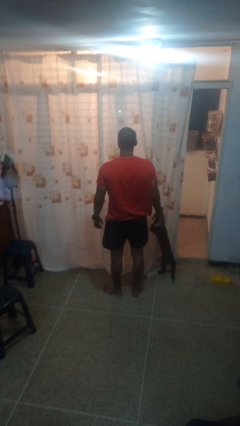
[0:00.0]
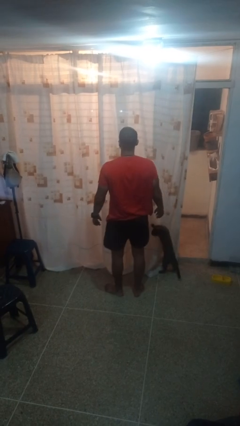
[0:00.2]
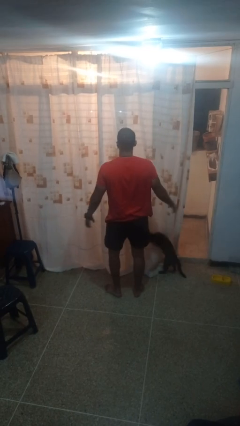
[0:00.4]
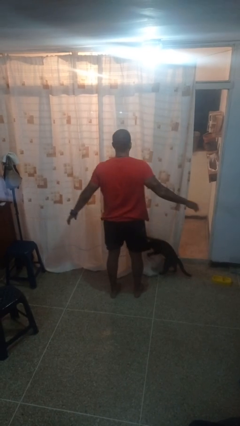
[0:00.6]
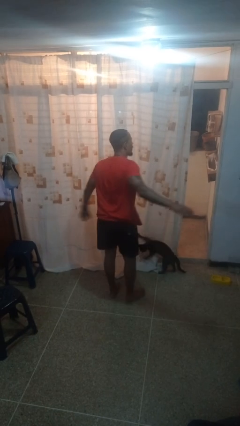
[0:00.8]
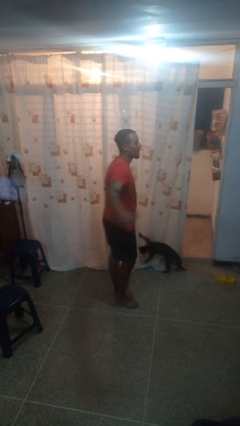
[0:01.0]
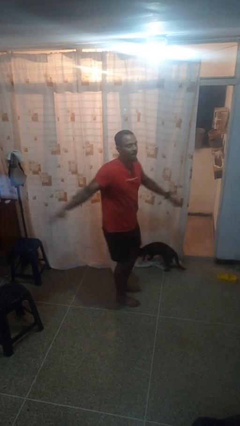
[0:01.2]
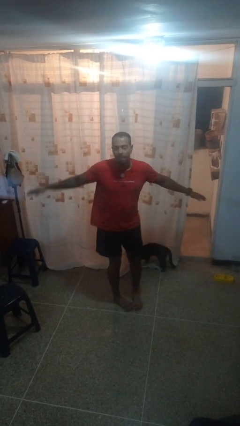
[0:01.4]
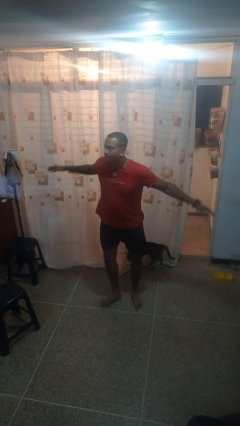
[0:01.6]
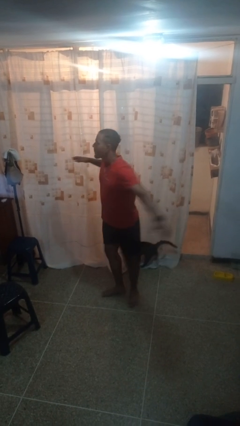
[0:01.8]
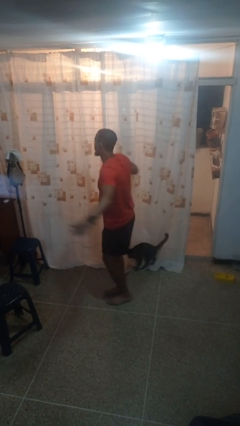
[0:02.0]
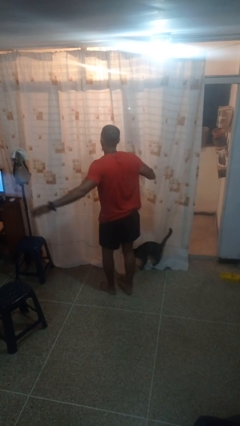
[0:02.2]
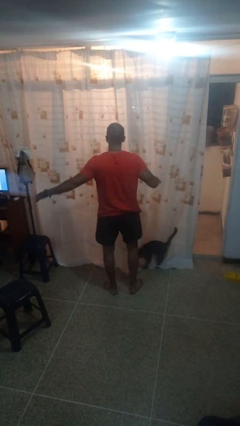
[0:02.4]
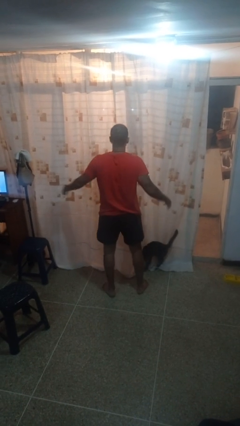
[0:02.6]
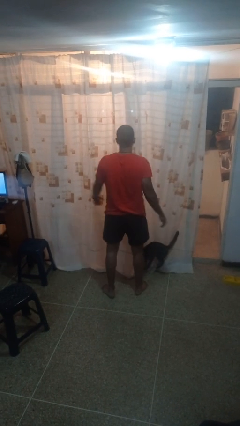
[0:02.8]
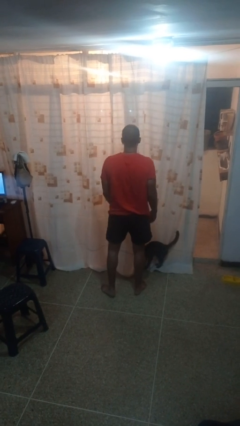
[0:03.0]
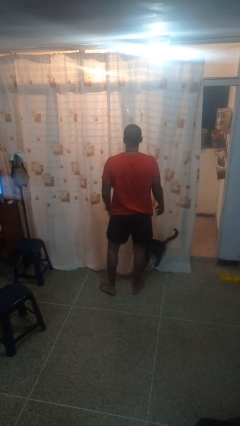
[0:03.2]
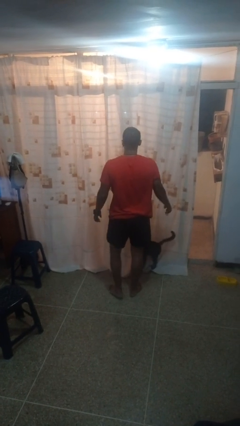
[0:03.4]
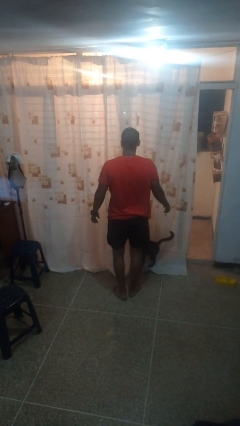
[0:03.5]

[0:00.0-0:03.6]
person twirls

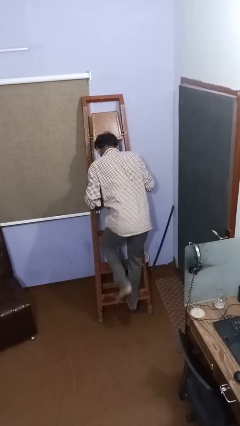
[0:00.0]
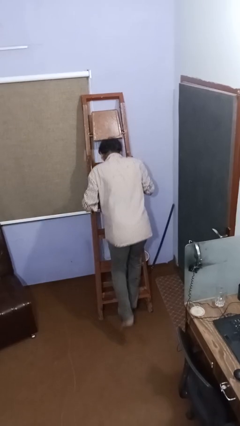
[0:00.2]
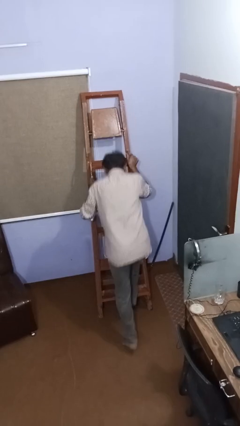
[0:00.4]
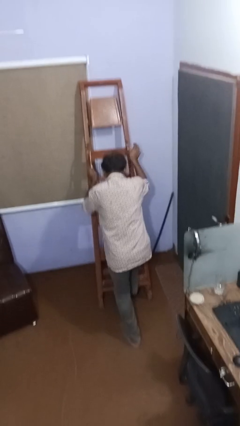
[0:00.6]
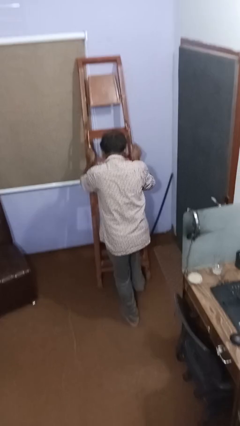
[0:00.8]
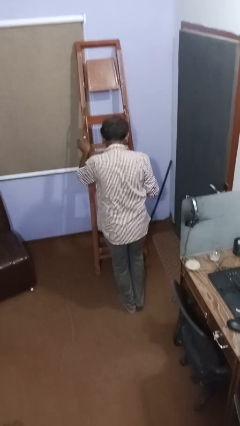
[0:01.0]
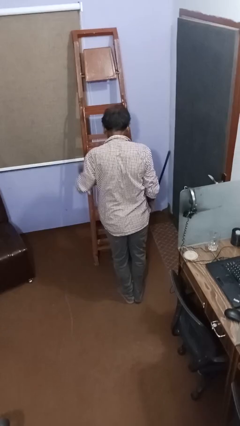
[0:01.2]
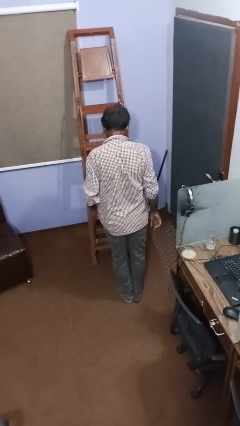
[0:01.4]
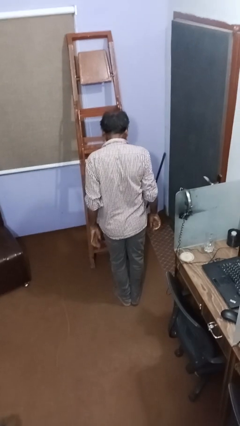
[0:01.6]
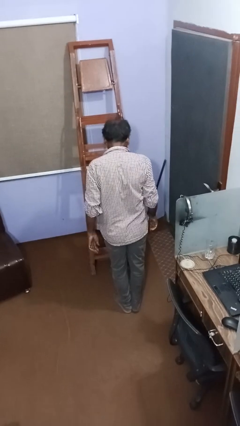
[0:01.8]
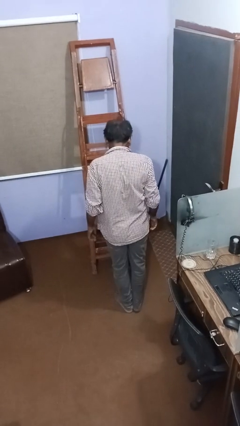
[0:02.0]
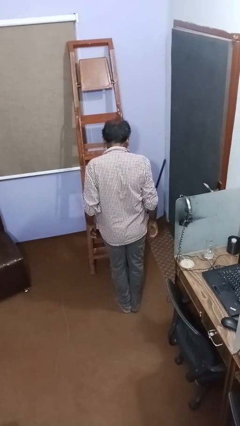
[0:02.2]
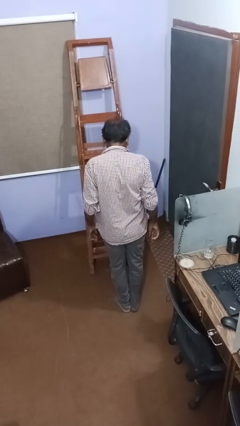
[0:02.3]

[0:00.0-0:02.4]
person climbs down ladder

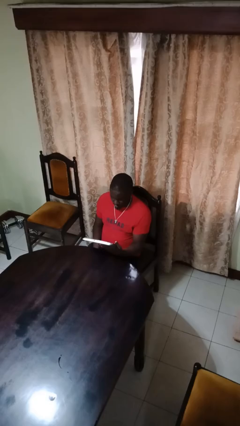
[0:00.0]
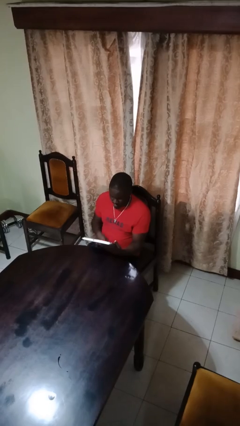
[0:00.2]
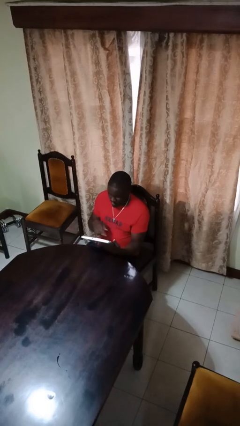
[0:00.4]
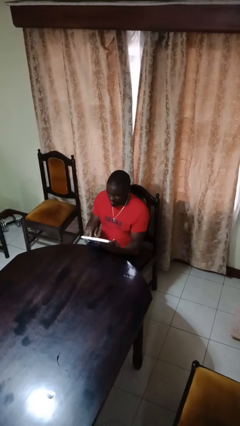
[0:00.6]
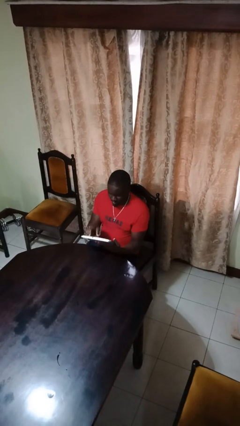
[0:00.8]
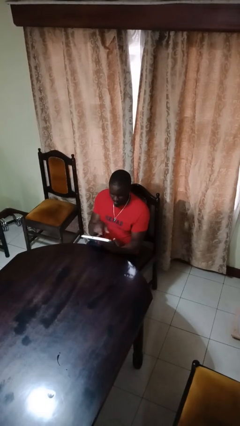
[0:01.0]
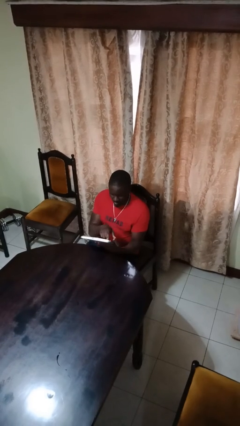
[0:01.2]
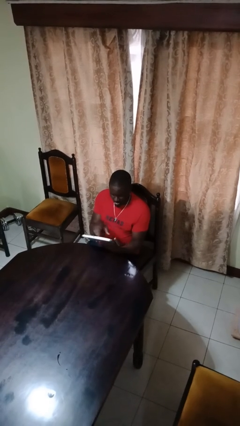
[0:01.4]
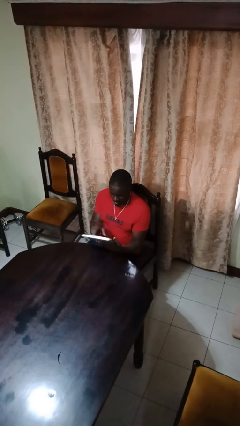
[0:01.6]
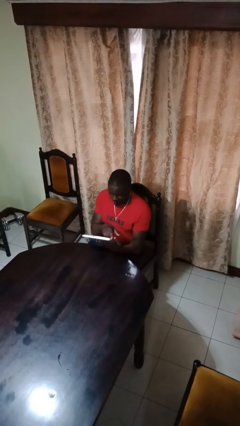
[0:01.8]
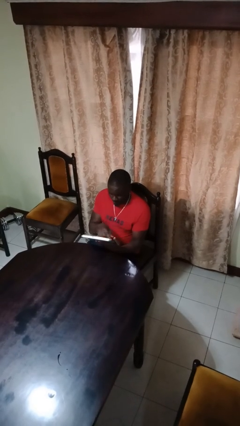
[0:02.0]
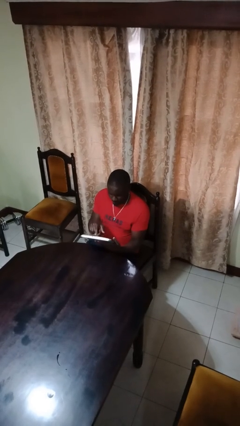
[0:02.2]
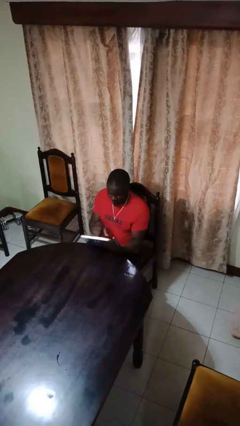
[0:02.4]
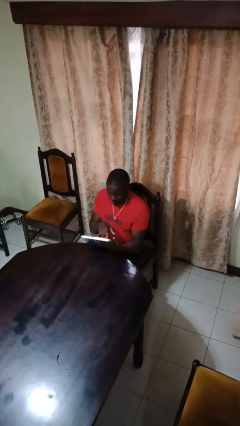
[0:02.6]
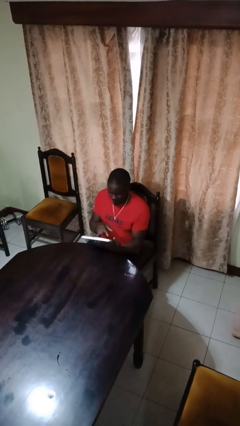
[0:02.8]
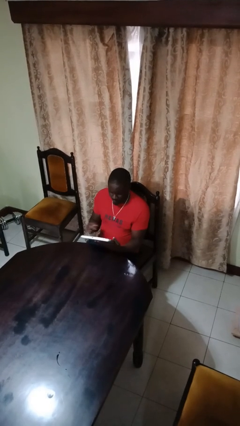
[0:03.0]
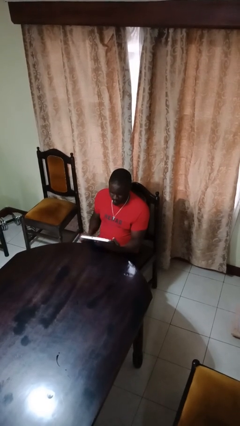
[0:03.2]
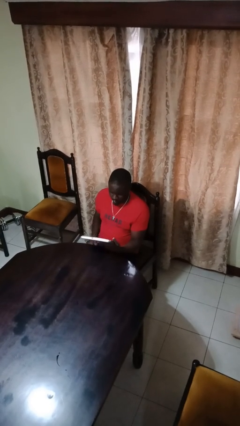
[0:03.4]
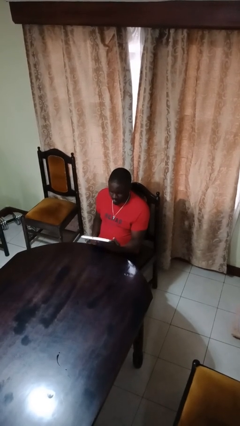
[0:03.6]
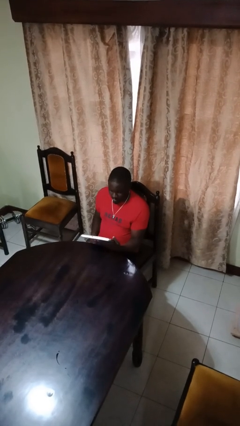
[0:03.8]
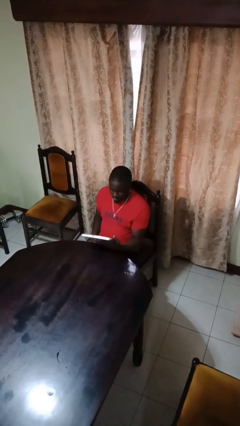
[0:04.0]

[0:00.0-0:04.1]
person interacts with tablet

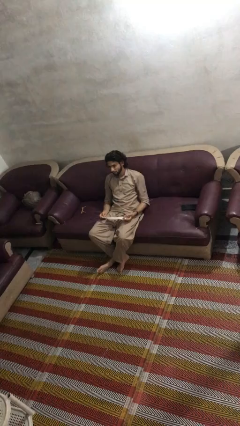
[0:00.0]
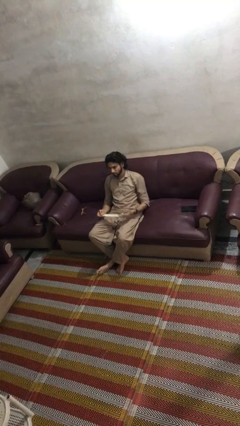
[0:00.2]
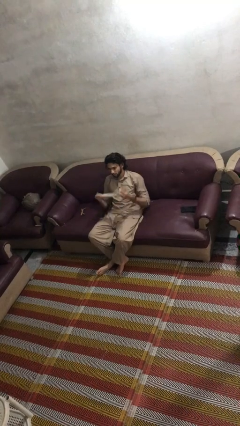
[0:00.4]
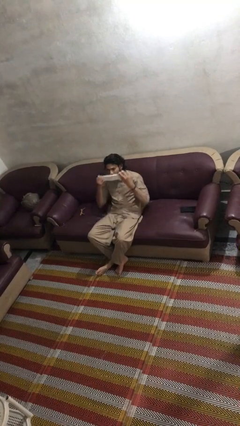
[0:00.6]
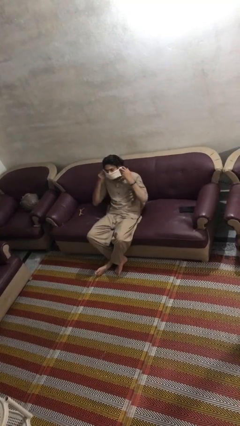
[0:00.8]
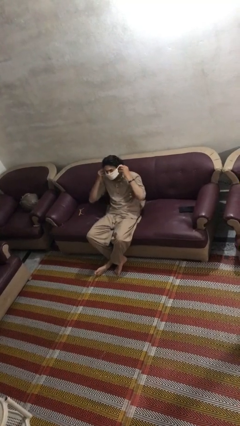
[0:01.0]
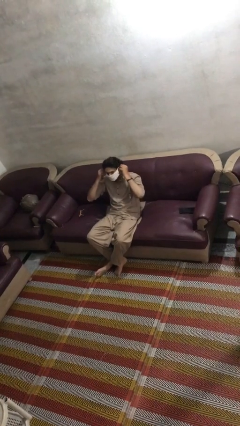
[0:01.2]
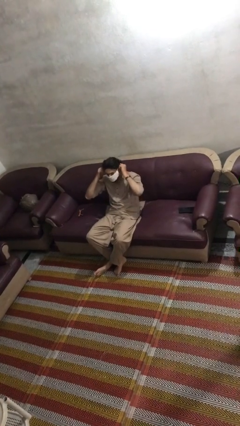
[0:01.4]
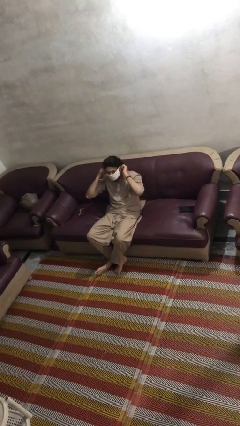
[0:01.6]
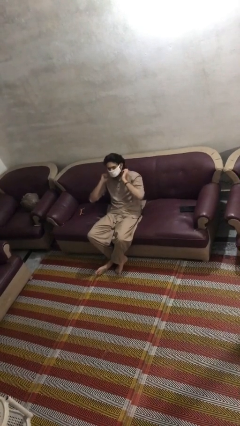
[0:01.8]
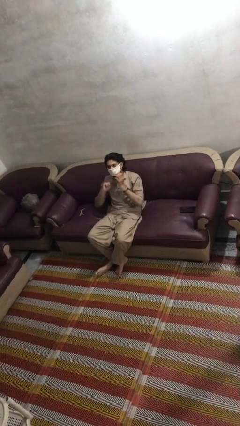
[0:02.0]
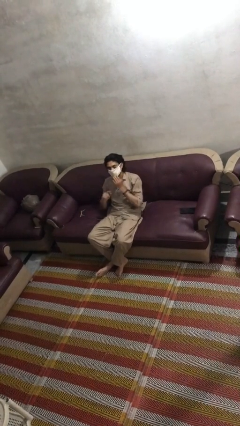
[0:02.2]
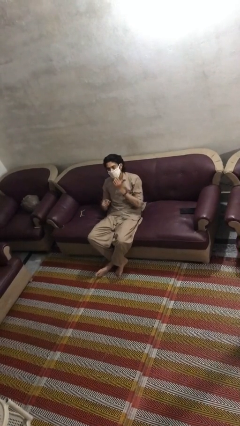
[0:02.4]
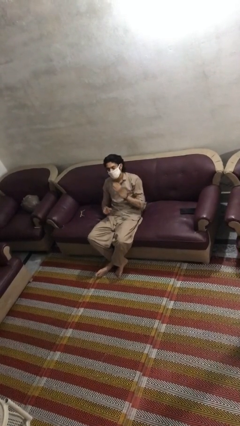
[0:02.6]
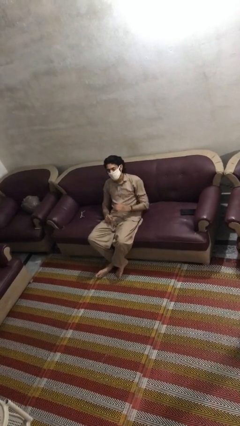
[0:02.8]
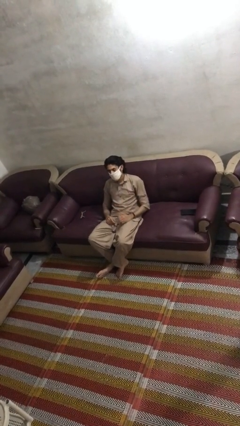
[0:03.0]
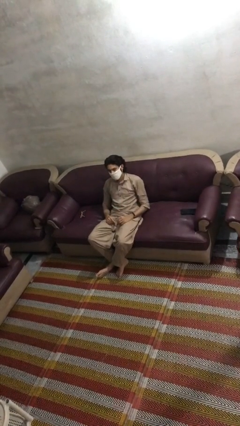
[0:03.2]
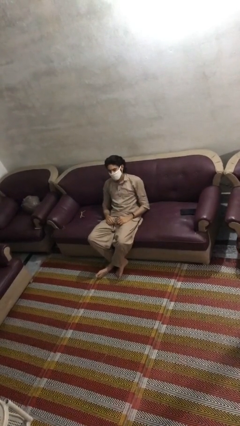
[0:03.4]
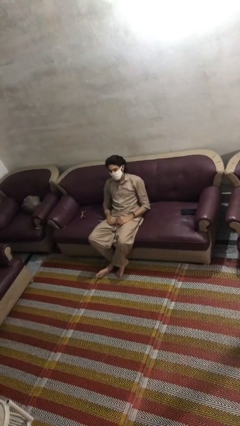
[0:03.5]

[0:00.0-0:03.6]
person puts on facemask

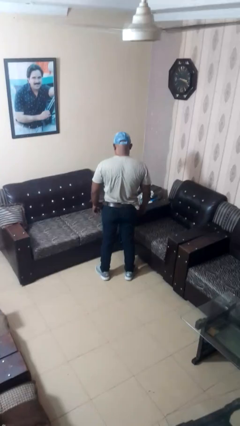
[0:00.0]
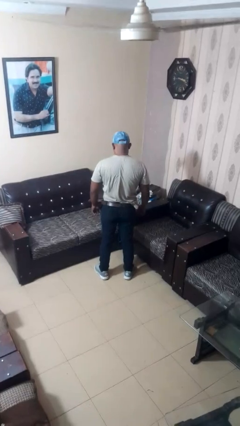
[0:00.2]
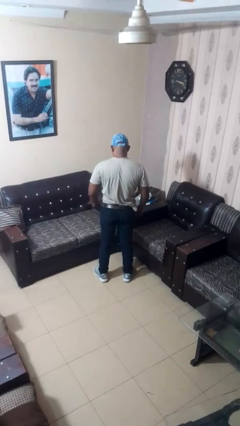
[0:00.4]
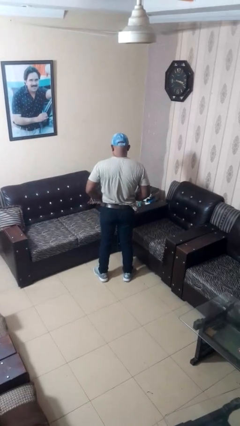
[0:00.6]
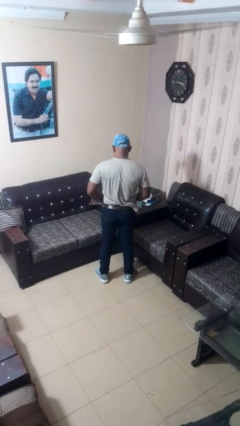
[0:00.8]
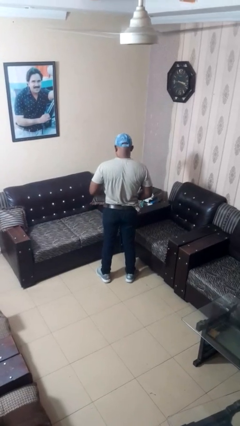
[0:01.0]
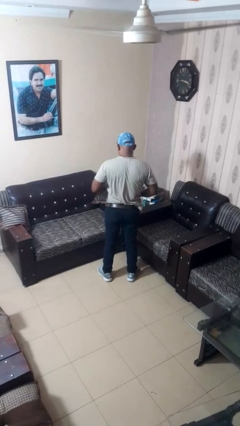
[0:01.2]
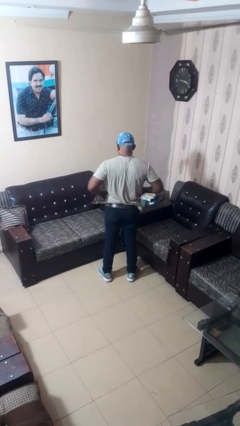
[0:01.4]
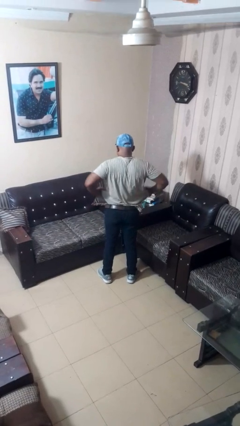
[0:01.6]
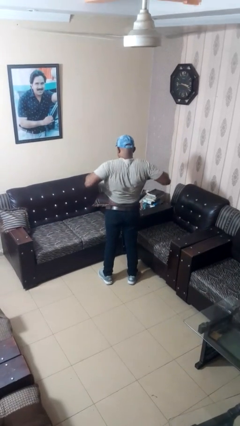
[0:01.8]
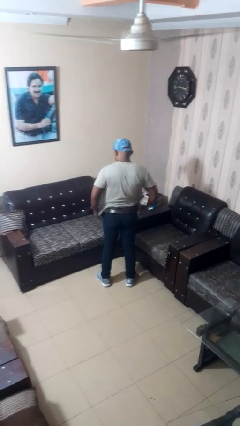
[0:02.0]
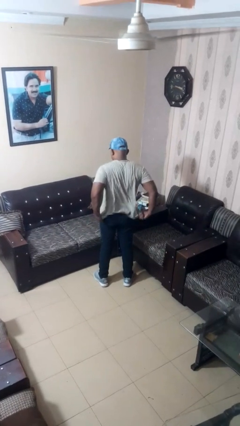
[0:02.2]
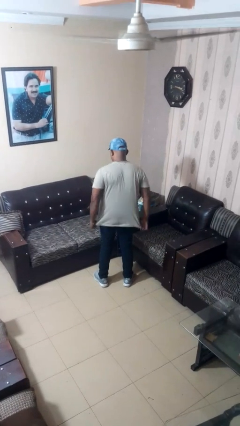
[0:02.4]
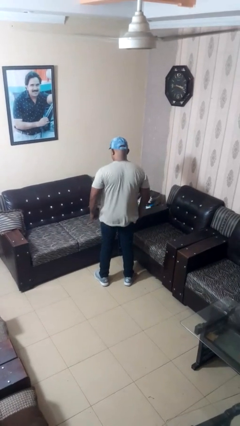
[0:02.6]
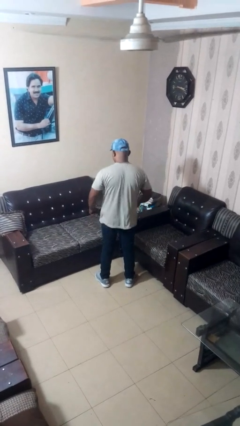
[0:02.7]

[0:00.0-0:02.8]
person untucks shirt

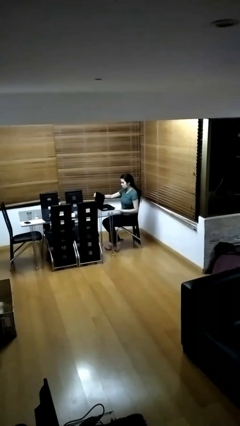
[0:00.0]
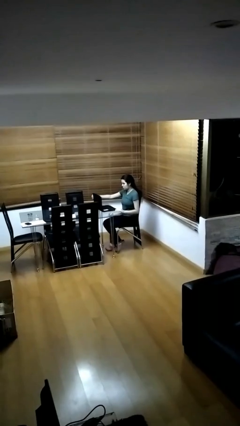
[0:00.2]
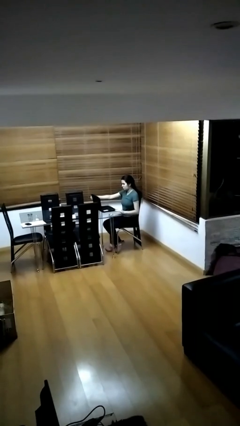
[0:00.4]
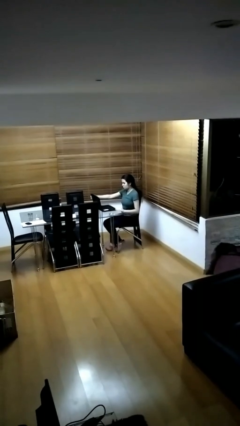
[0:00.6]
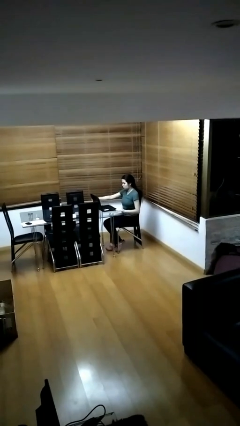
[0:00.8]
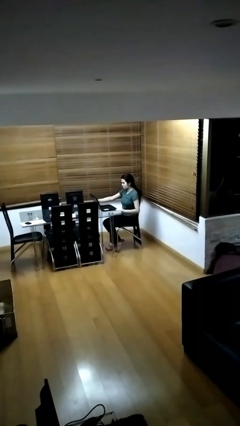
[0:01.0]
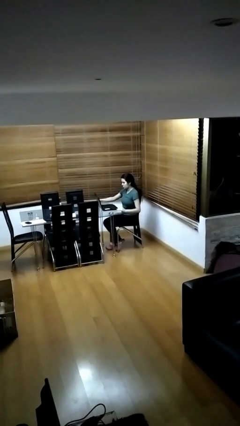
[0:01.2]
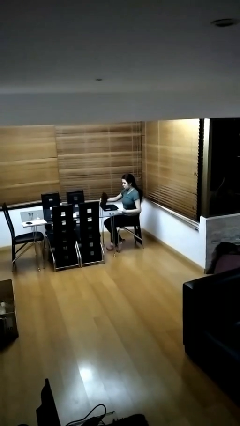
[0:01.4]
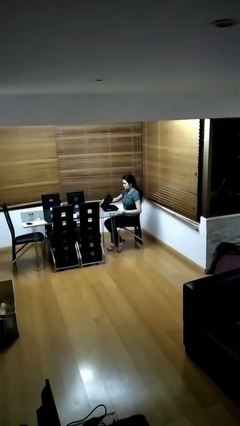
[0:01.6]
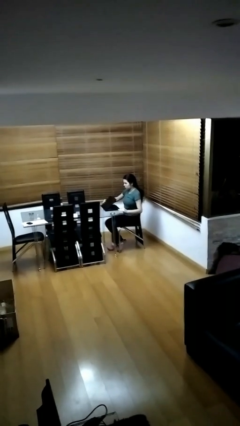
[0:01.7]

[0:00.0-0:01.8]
person interacts with laptop
